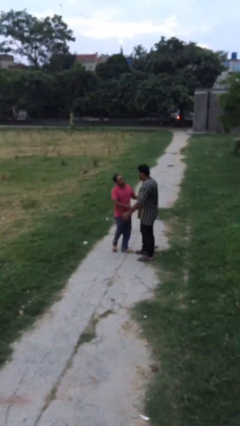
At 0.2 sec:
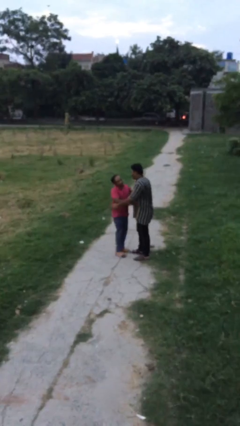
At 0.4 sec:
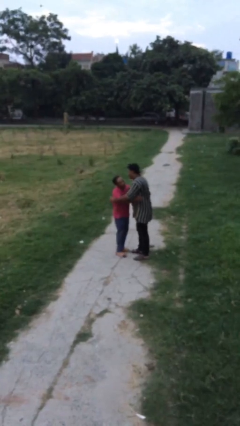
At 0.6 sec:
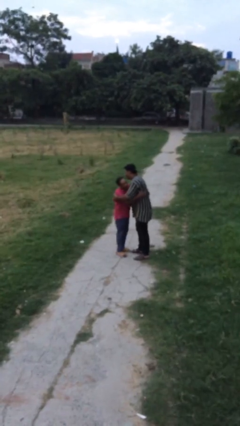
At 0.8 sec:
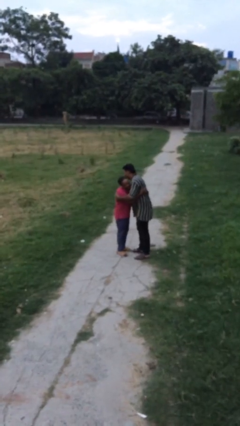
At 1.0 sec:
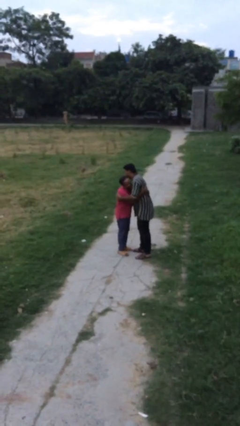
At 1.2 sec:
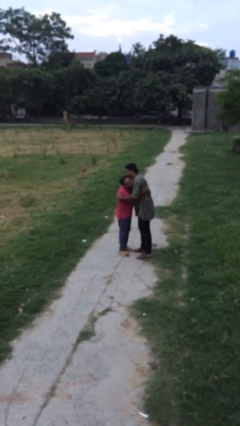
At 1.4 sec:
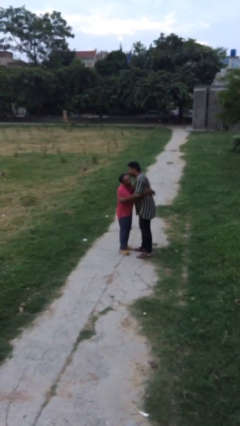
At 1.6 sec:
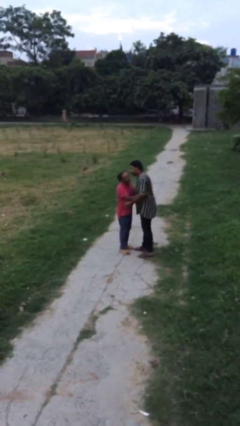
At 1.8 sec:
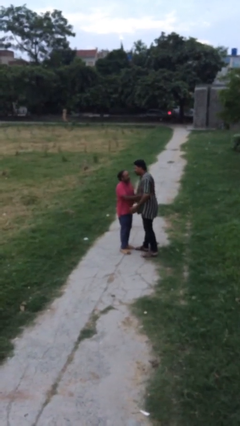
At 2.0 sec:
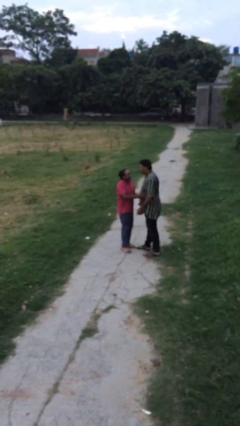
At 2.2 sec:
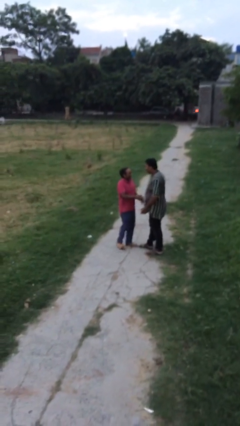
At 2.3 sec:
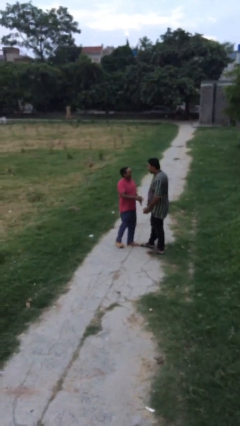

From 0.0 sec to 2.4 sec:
person embraces person

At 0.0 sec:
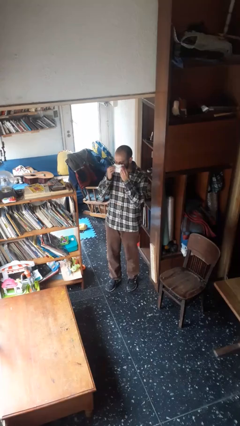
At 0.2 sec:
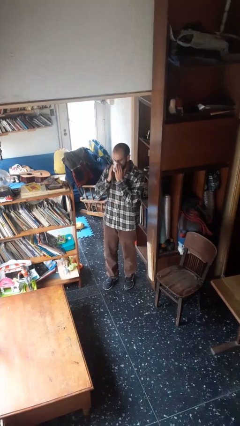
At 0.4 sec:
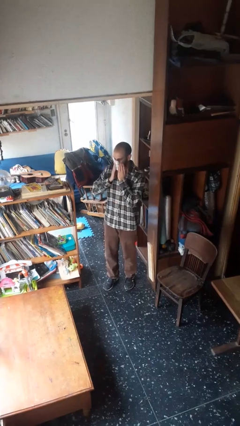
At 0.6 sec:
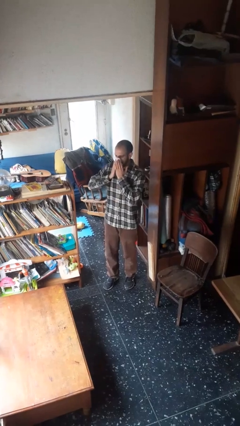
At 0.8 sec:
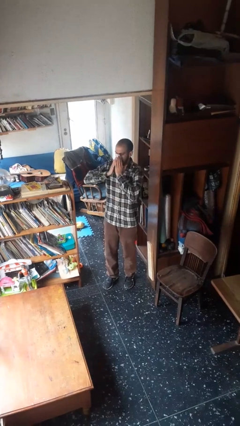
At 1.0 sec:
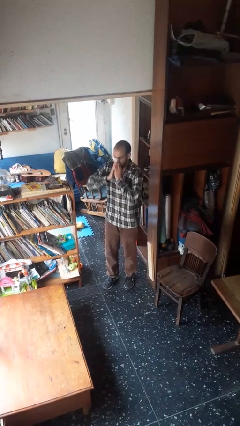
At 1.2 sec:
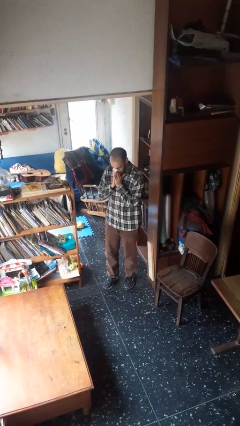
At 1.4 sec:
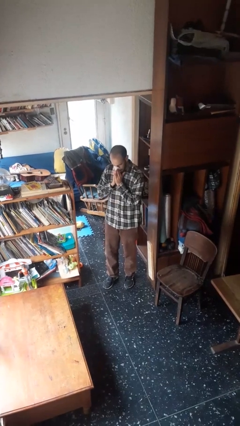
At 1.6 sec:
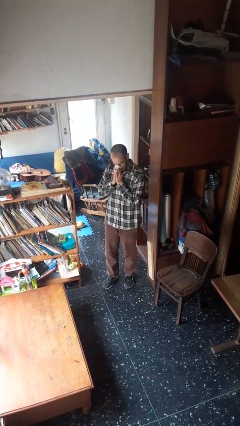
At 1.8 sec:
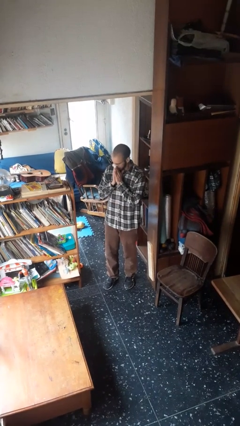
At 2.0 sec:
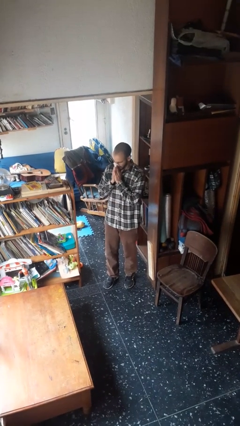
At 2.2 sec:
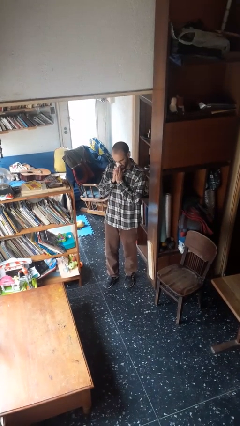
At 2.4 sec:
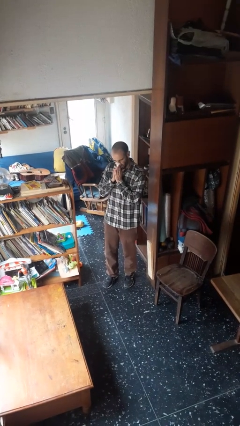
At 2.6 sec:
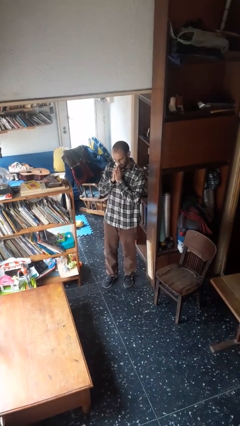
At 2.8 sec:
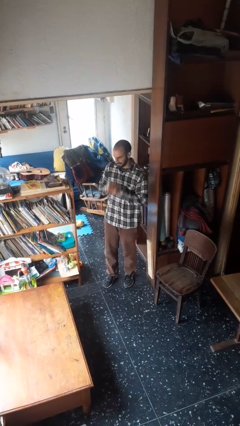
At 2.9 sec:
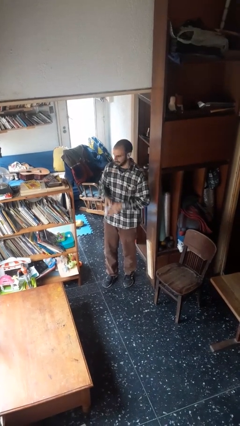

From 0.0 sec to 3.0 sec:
person blows nose

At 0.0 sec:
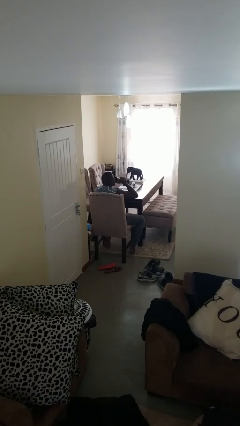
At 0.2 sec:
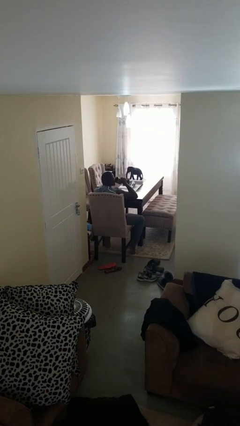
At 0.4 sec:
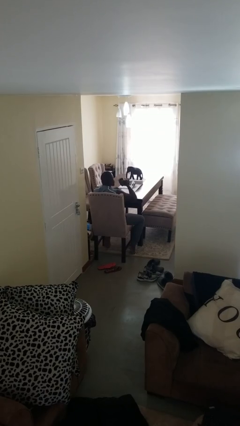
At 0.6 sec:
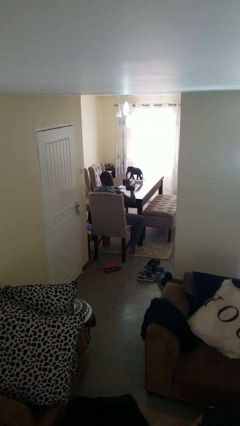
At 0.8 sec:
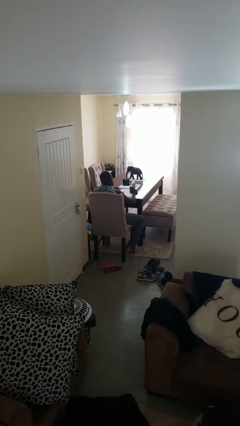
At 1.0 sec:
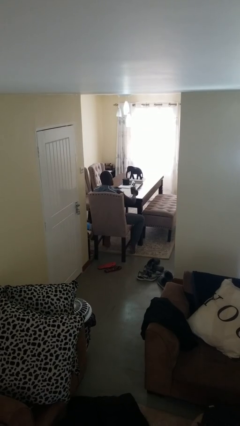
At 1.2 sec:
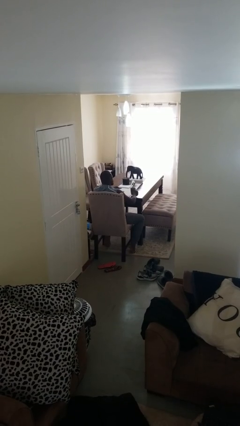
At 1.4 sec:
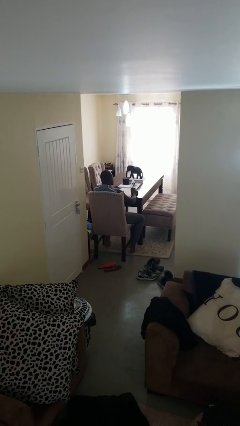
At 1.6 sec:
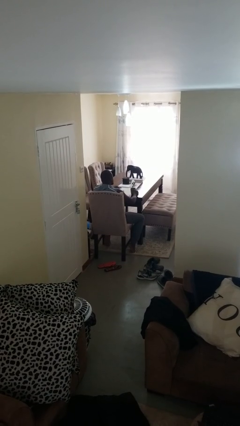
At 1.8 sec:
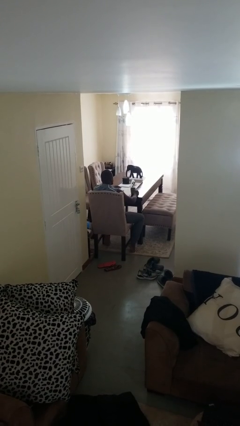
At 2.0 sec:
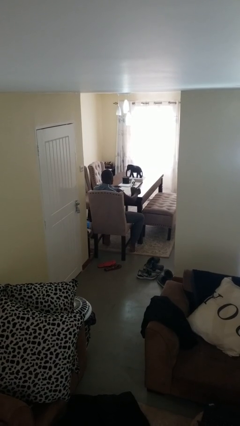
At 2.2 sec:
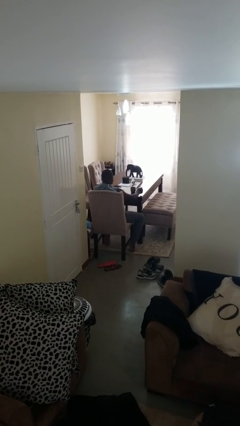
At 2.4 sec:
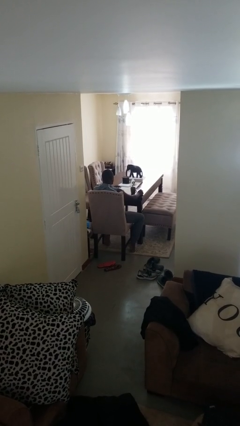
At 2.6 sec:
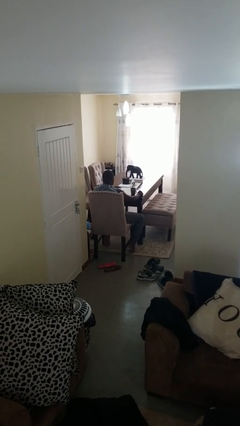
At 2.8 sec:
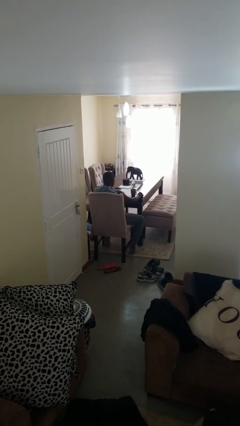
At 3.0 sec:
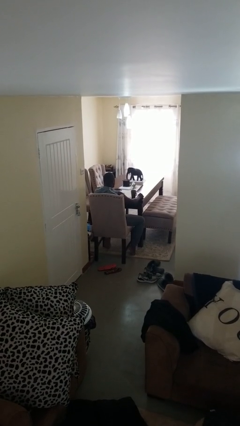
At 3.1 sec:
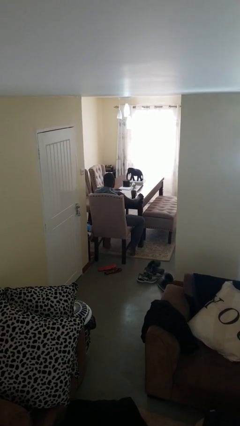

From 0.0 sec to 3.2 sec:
person puts down object on table

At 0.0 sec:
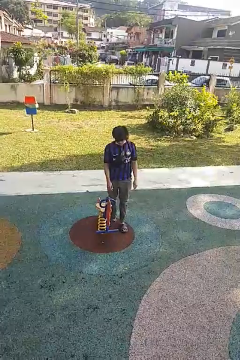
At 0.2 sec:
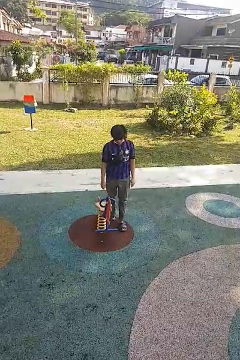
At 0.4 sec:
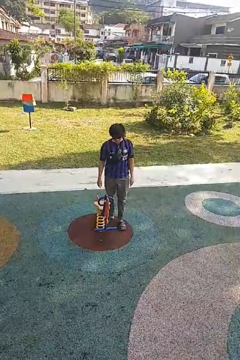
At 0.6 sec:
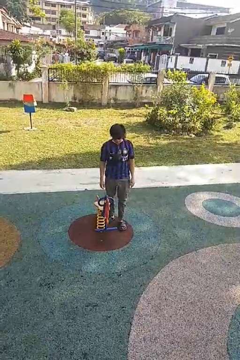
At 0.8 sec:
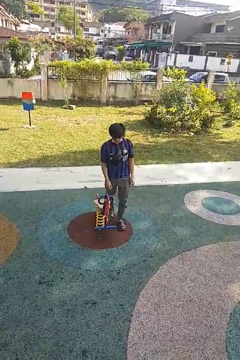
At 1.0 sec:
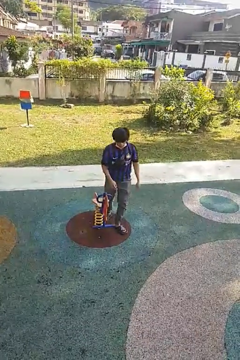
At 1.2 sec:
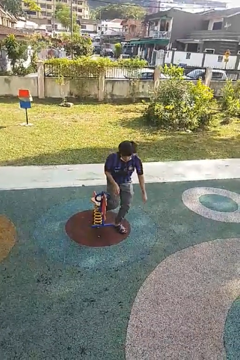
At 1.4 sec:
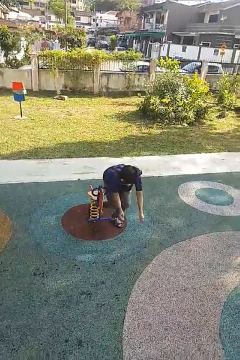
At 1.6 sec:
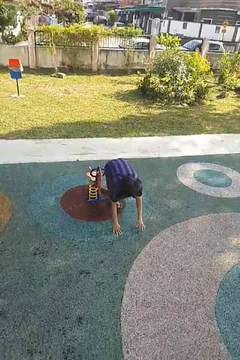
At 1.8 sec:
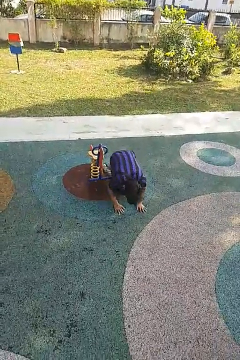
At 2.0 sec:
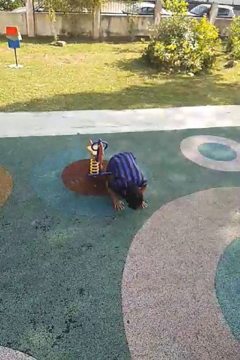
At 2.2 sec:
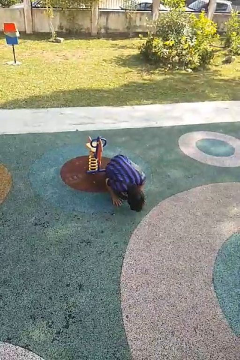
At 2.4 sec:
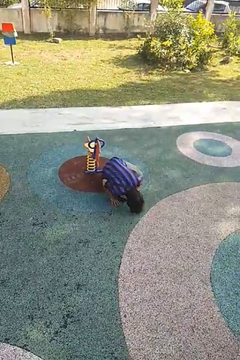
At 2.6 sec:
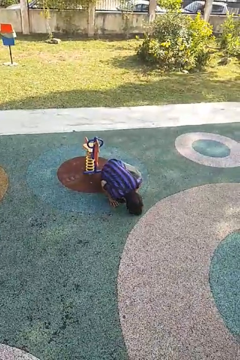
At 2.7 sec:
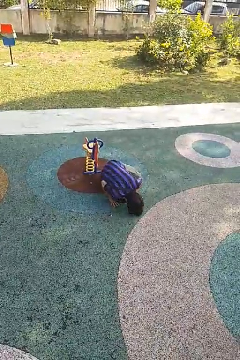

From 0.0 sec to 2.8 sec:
person trips on object on floor

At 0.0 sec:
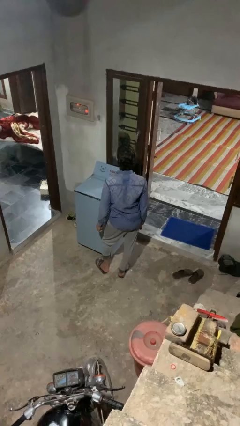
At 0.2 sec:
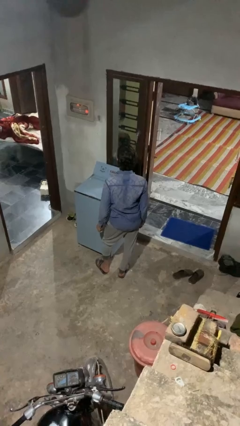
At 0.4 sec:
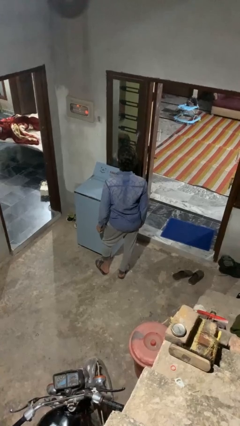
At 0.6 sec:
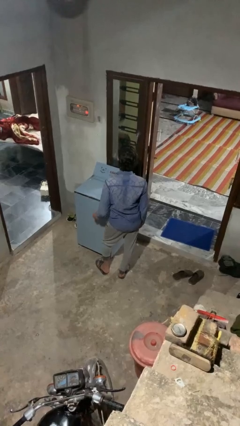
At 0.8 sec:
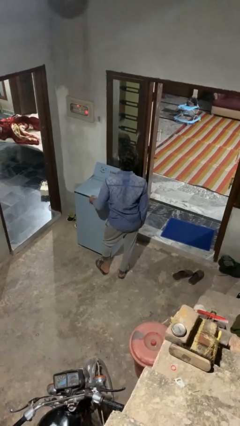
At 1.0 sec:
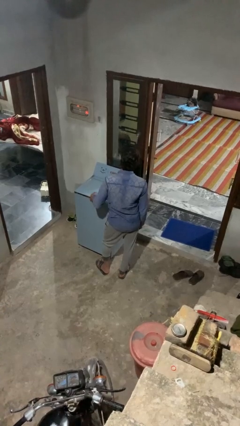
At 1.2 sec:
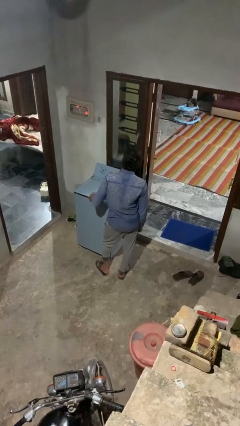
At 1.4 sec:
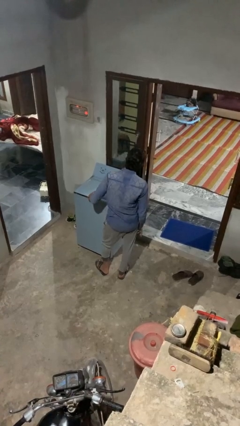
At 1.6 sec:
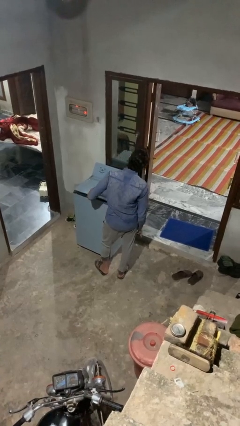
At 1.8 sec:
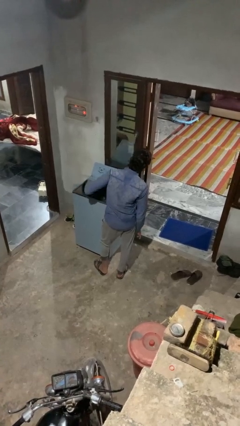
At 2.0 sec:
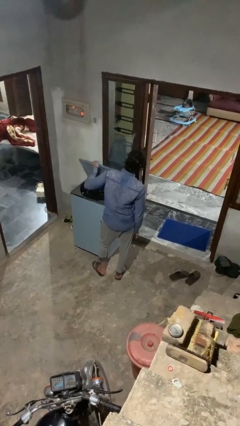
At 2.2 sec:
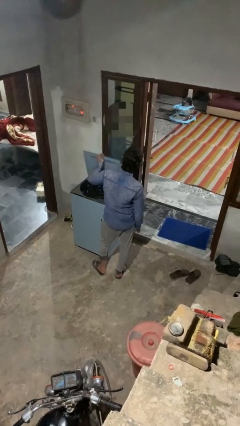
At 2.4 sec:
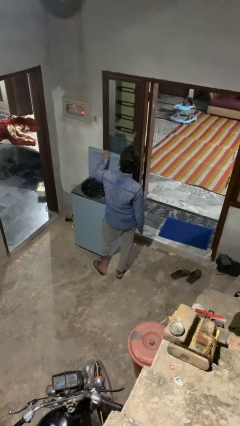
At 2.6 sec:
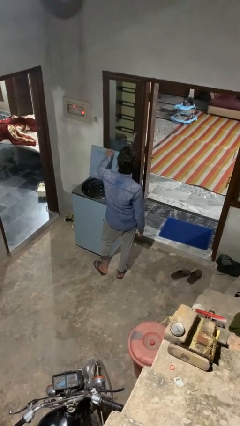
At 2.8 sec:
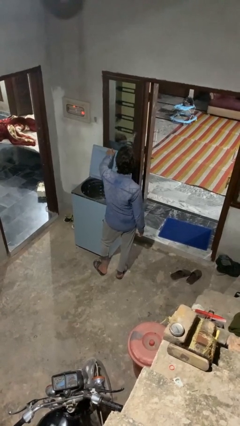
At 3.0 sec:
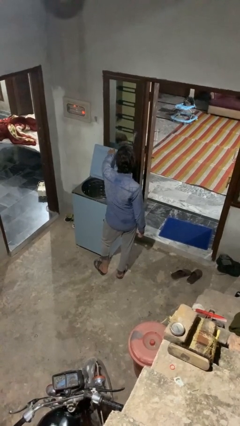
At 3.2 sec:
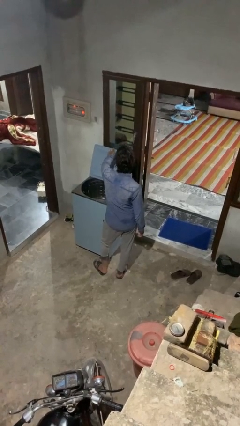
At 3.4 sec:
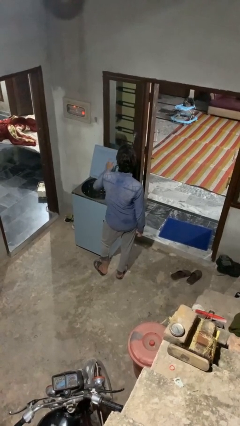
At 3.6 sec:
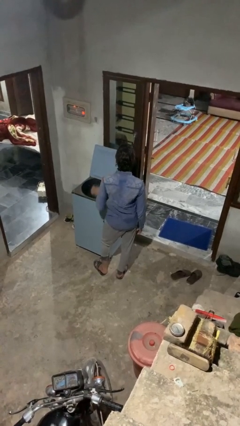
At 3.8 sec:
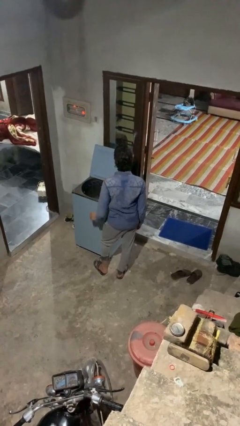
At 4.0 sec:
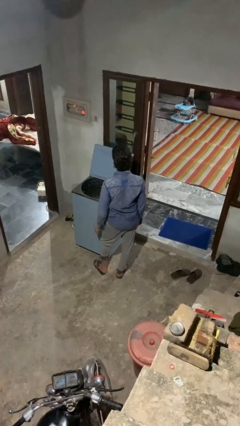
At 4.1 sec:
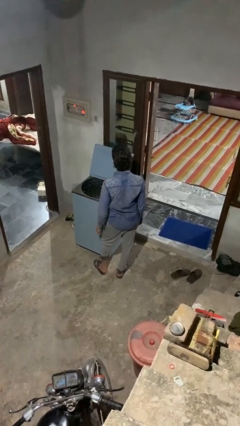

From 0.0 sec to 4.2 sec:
person opens clothes washer

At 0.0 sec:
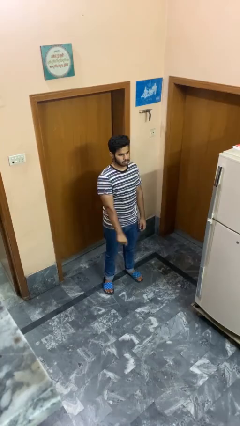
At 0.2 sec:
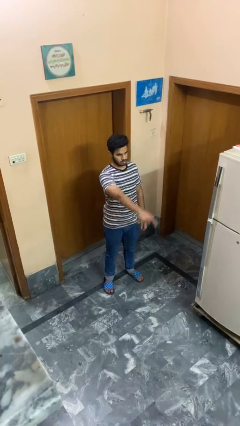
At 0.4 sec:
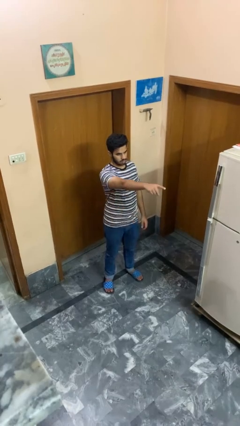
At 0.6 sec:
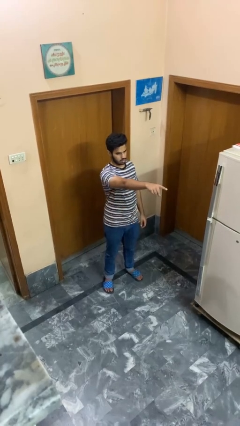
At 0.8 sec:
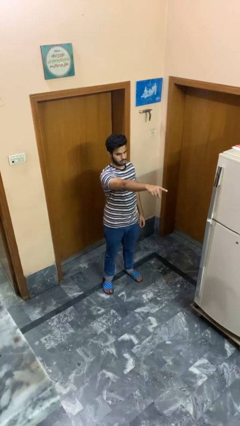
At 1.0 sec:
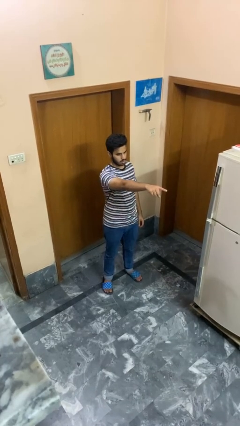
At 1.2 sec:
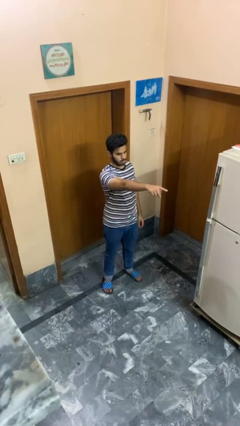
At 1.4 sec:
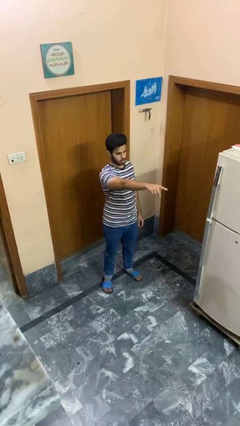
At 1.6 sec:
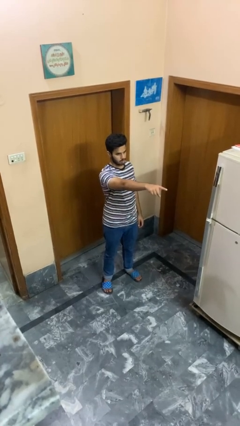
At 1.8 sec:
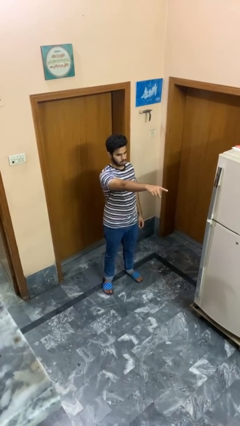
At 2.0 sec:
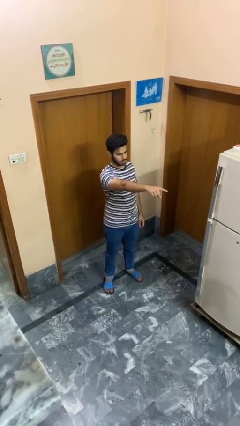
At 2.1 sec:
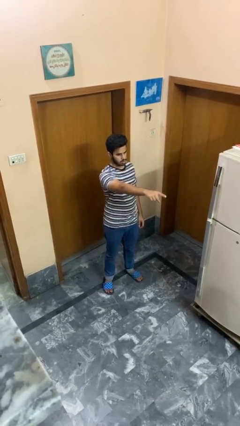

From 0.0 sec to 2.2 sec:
person points at person
